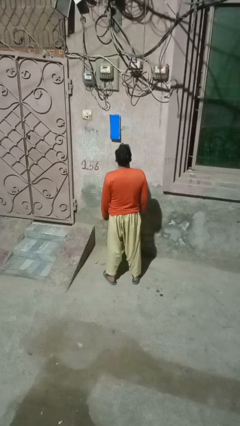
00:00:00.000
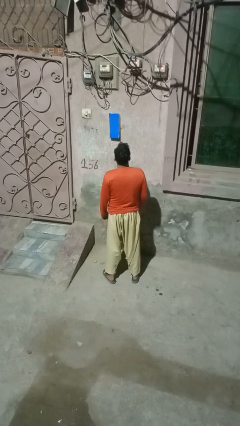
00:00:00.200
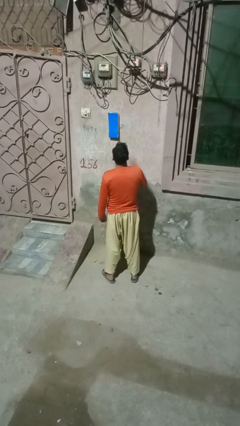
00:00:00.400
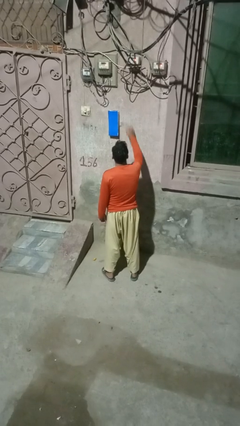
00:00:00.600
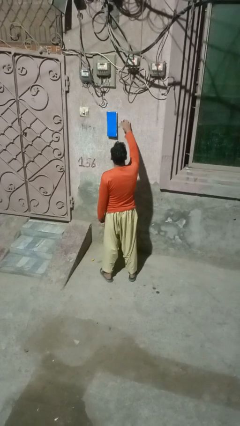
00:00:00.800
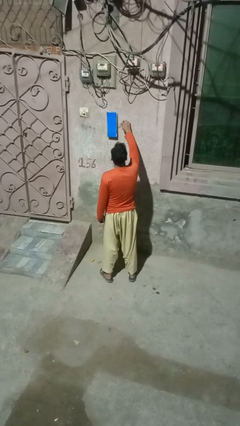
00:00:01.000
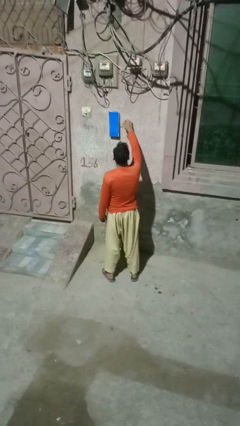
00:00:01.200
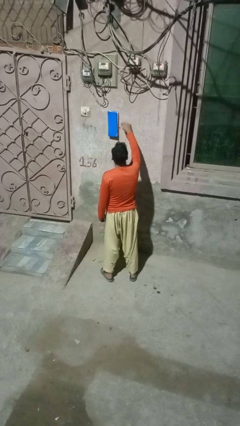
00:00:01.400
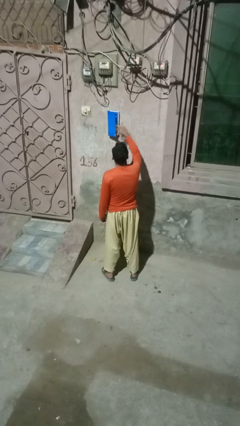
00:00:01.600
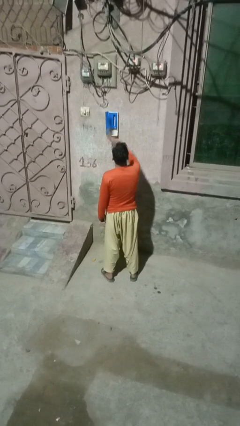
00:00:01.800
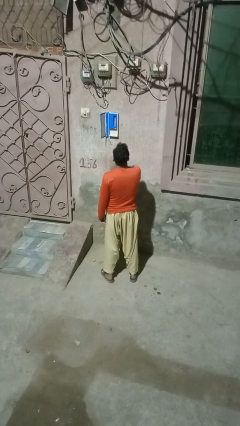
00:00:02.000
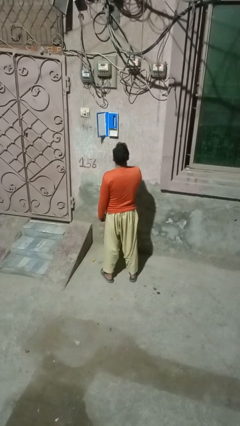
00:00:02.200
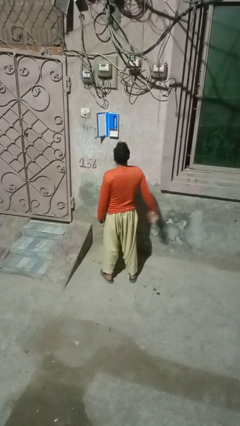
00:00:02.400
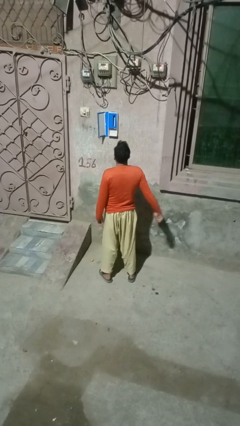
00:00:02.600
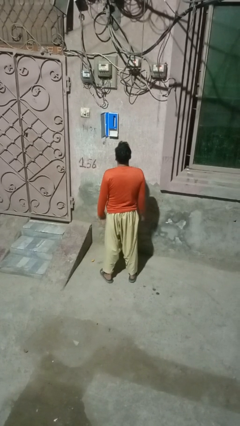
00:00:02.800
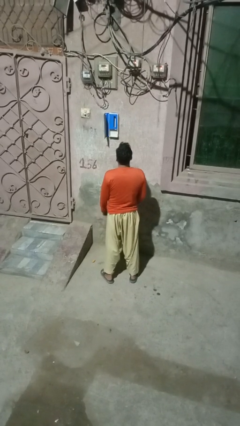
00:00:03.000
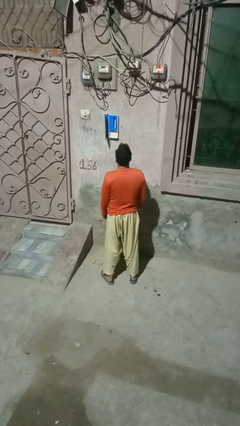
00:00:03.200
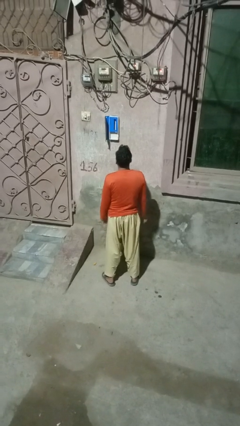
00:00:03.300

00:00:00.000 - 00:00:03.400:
person opens mailbox

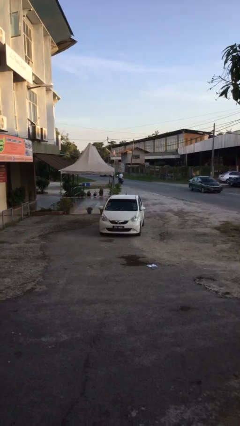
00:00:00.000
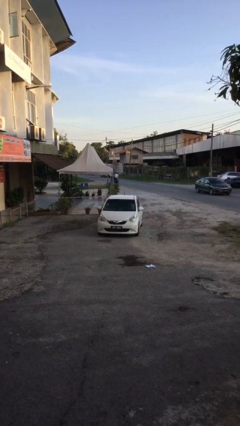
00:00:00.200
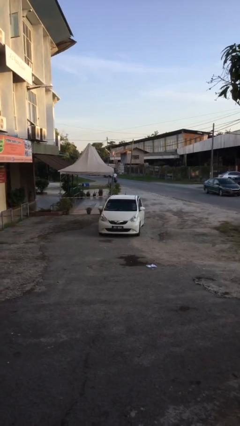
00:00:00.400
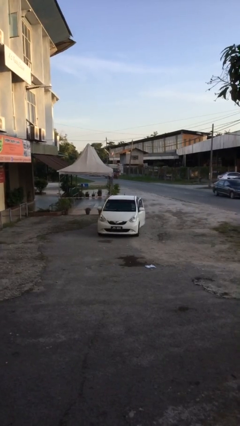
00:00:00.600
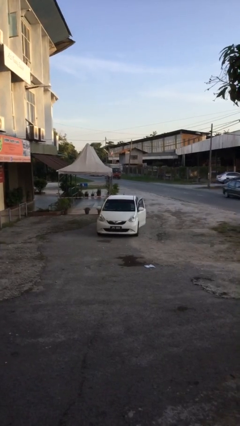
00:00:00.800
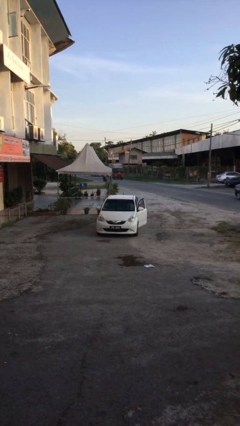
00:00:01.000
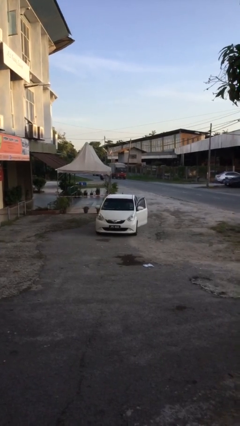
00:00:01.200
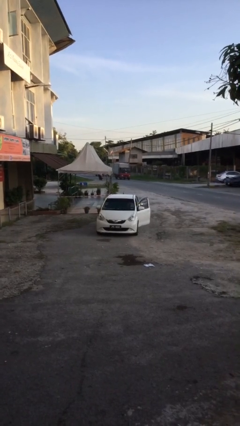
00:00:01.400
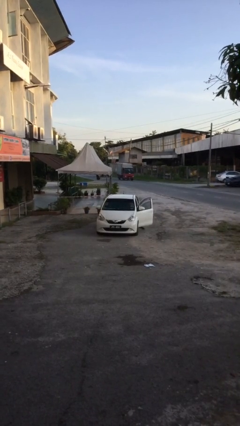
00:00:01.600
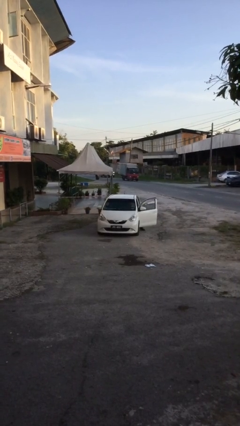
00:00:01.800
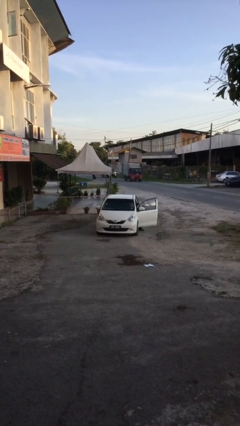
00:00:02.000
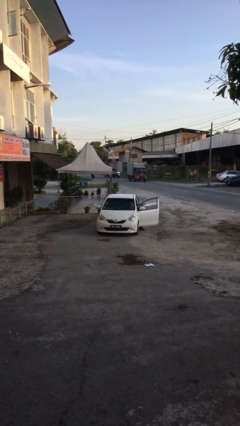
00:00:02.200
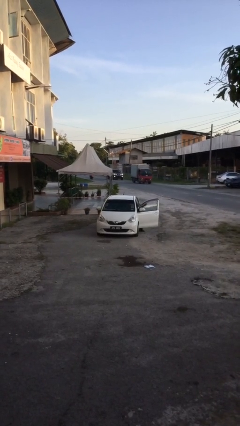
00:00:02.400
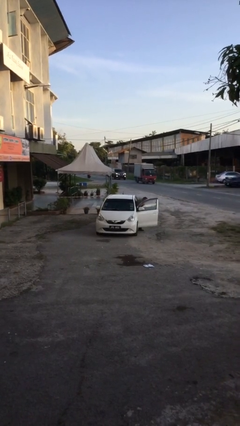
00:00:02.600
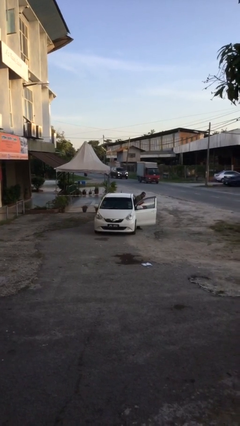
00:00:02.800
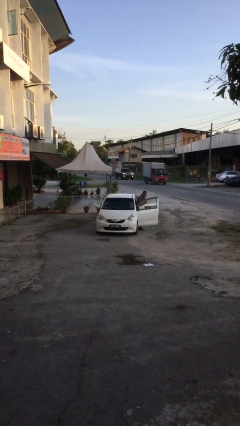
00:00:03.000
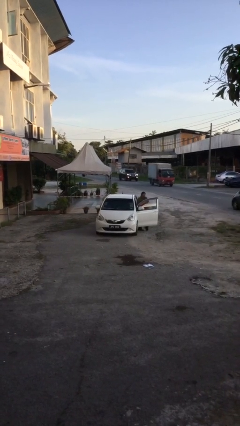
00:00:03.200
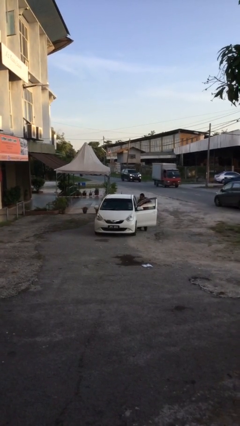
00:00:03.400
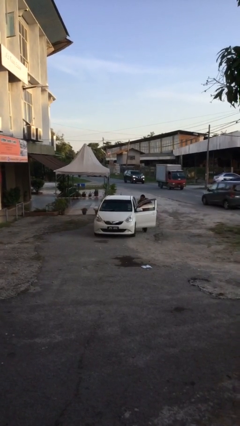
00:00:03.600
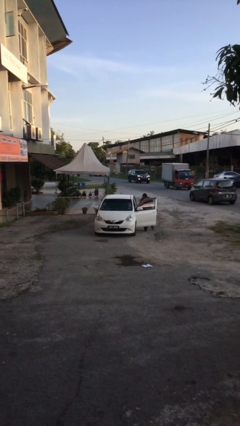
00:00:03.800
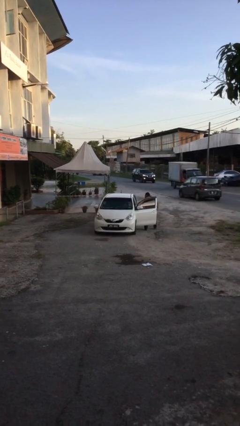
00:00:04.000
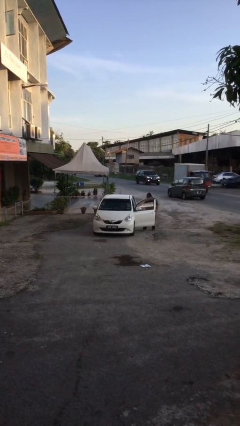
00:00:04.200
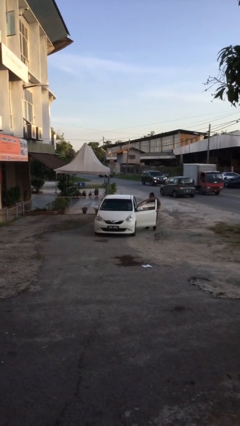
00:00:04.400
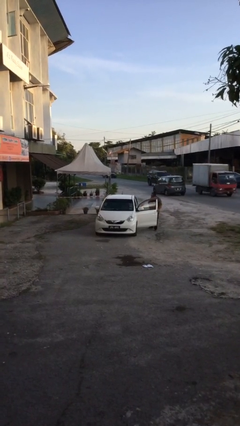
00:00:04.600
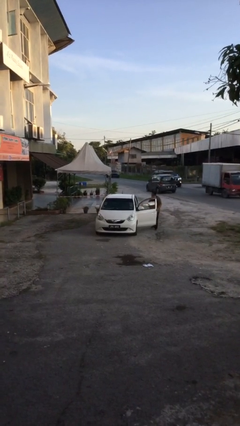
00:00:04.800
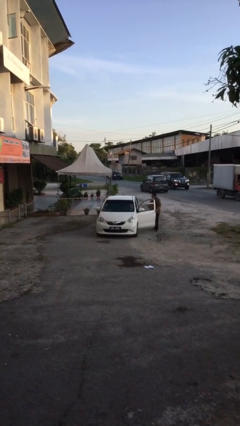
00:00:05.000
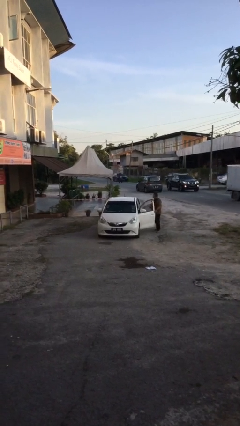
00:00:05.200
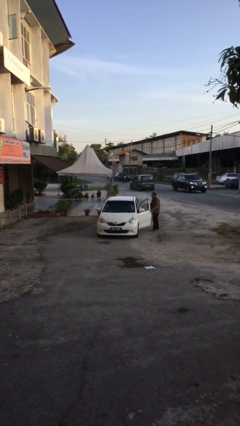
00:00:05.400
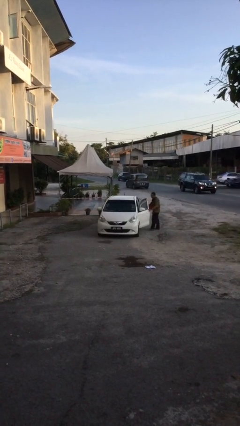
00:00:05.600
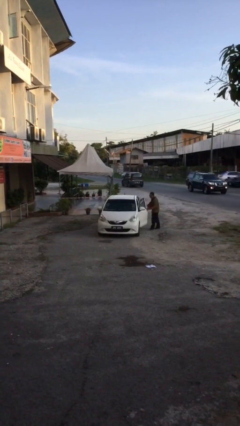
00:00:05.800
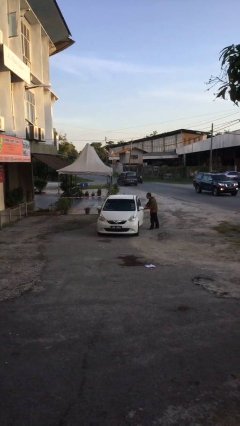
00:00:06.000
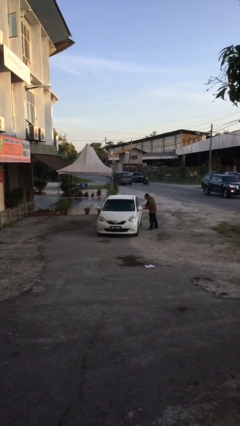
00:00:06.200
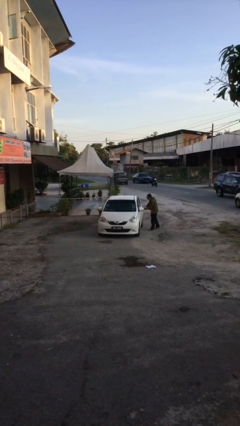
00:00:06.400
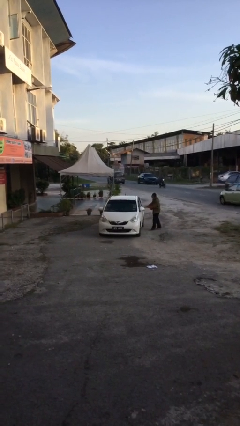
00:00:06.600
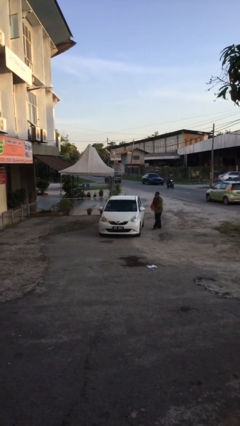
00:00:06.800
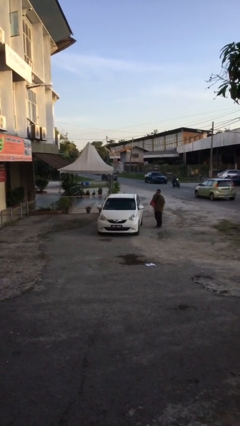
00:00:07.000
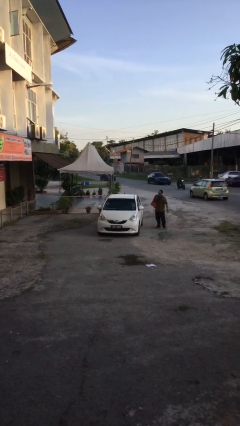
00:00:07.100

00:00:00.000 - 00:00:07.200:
car drops off person

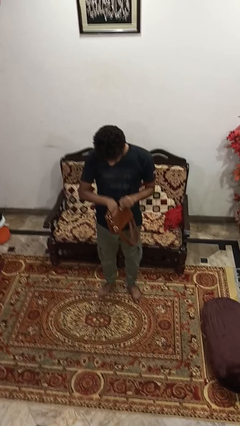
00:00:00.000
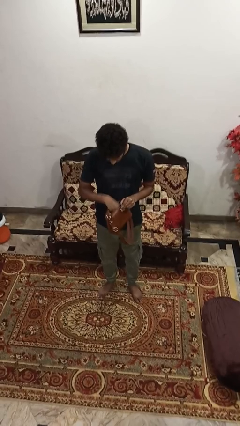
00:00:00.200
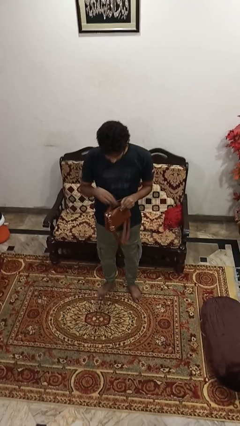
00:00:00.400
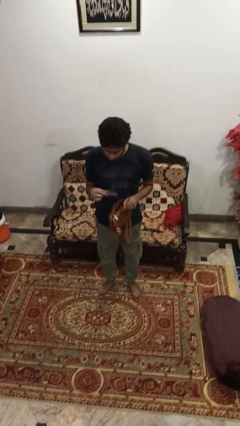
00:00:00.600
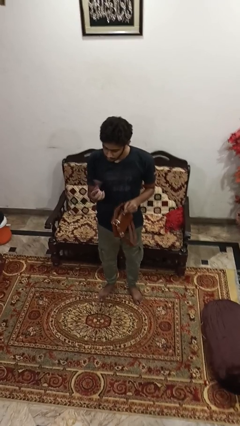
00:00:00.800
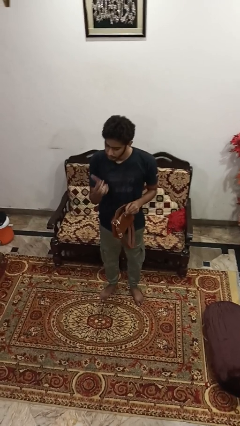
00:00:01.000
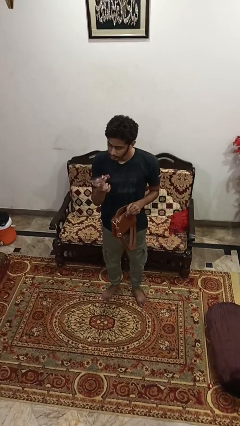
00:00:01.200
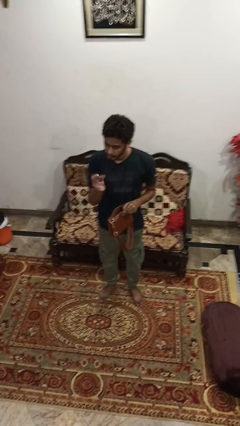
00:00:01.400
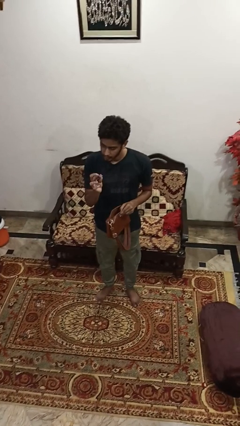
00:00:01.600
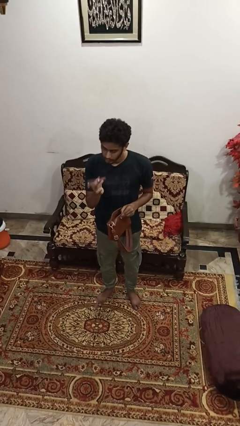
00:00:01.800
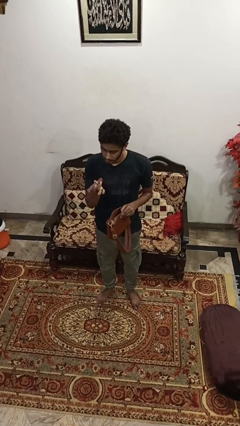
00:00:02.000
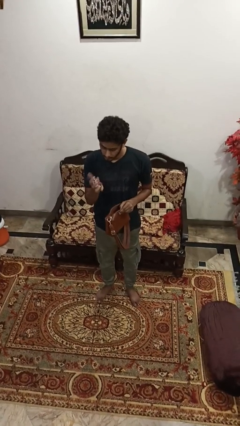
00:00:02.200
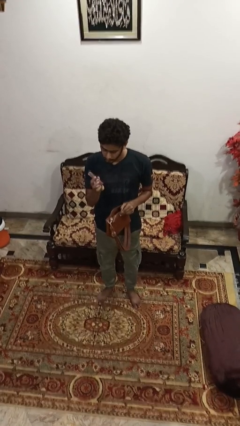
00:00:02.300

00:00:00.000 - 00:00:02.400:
person takes object from purse

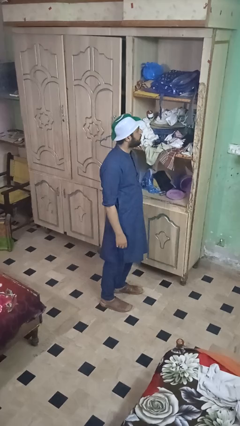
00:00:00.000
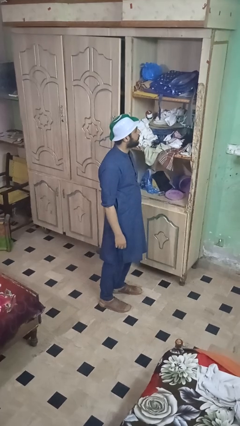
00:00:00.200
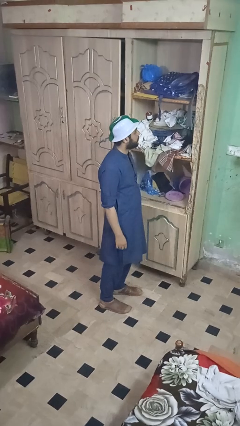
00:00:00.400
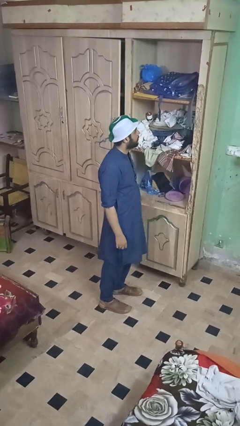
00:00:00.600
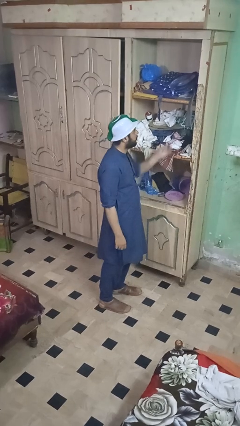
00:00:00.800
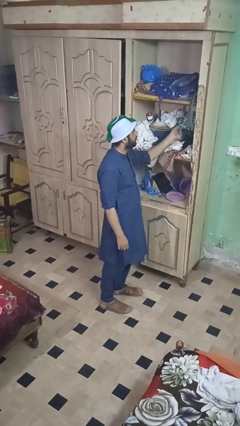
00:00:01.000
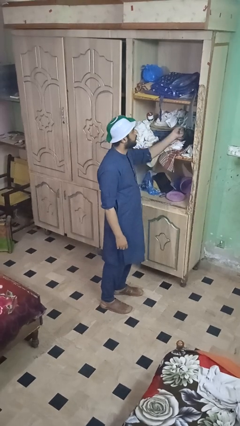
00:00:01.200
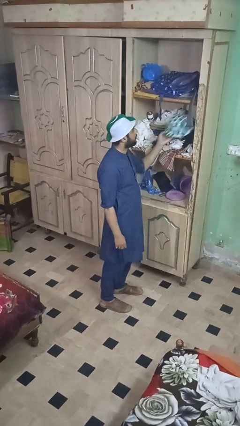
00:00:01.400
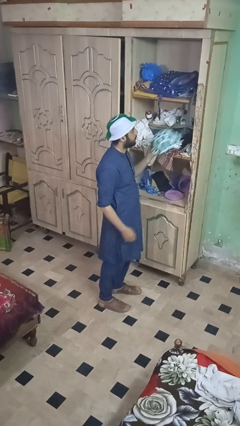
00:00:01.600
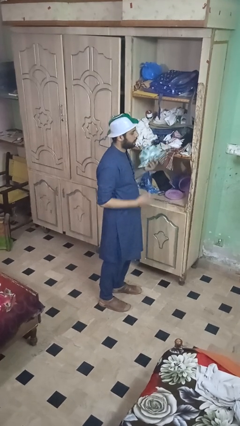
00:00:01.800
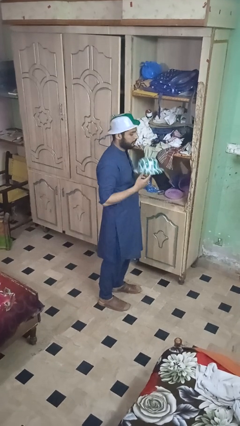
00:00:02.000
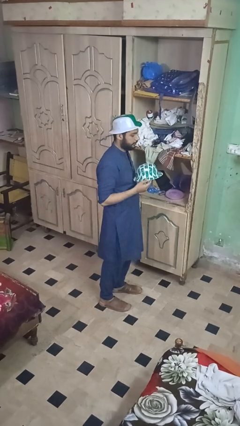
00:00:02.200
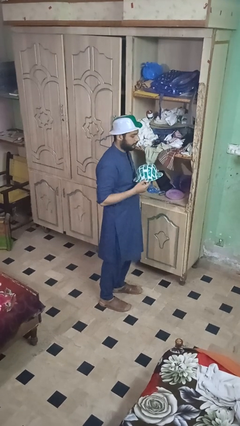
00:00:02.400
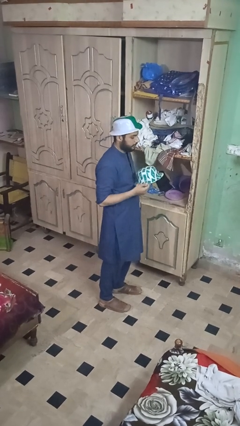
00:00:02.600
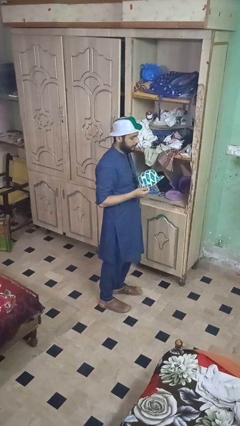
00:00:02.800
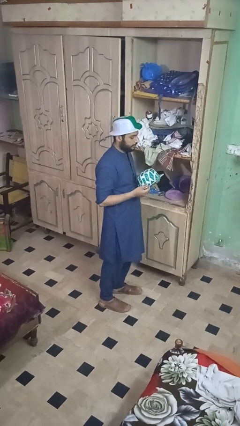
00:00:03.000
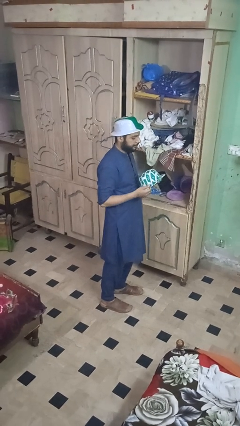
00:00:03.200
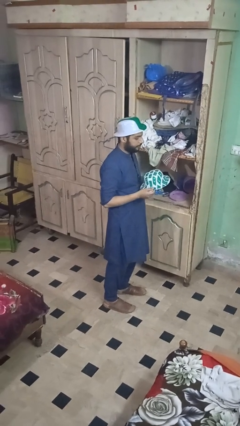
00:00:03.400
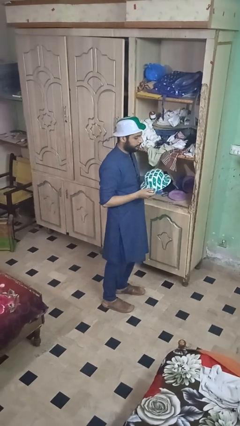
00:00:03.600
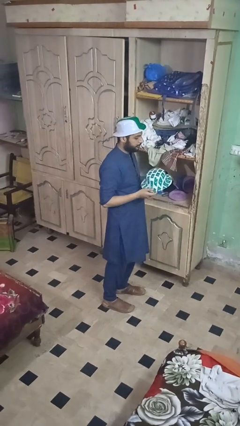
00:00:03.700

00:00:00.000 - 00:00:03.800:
person picks up object from shelf

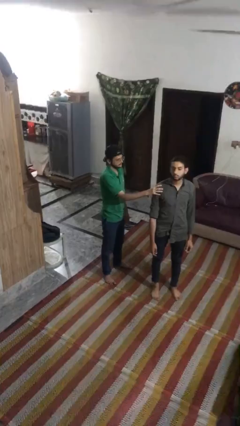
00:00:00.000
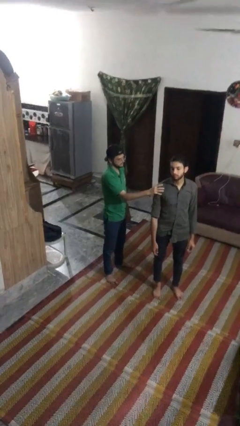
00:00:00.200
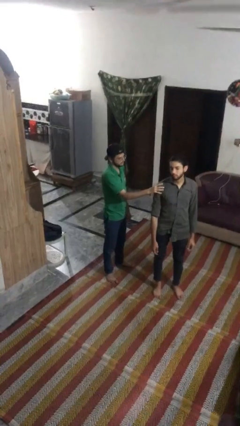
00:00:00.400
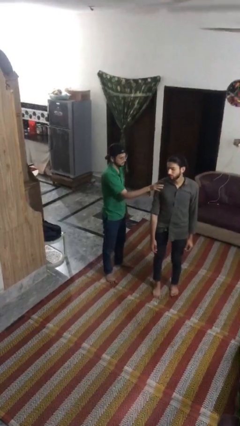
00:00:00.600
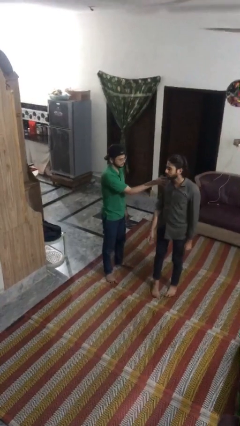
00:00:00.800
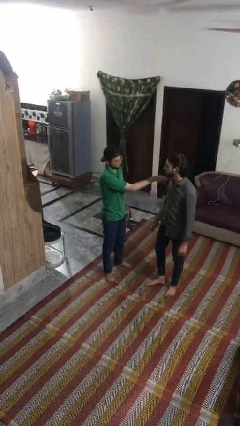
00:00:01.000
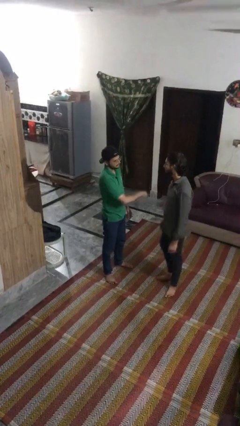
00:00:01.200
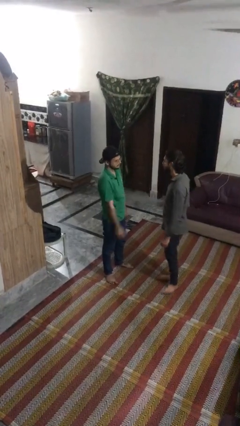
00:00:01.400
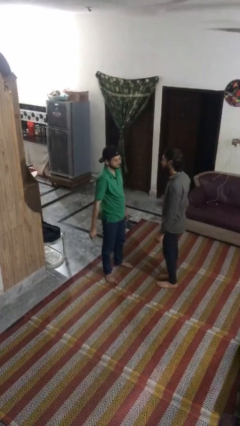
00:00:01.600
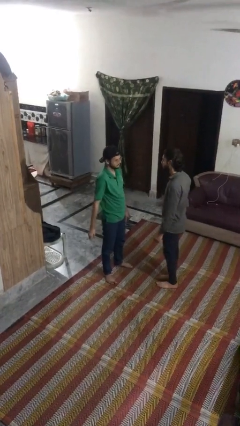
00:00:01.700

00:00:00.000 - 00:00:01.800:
person spins person around
